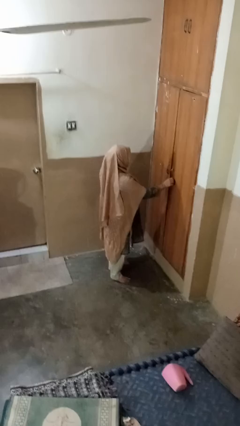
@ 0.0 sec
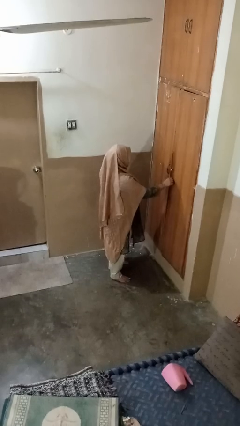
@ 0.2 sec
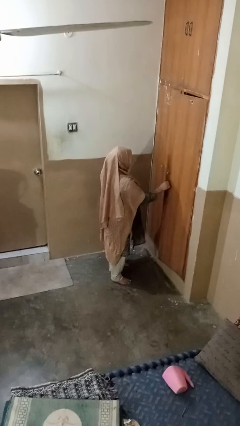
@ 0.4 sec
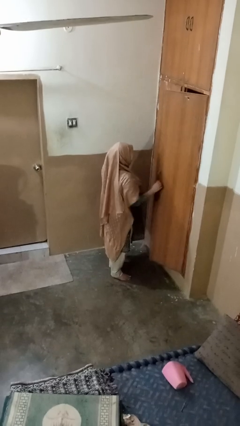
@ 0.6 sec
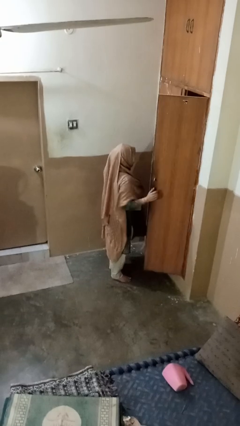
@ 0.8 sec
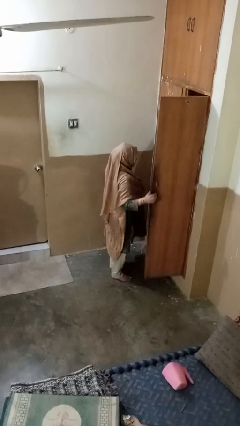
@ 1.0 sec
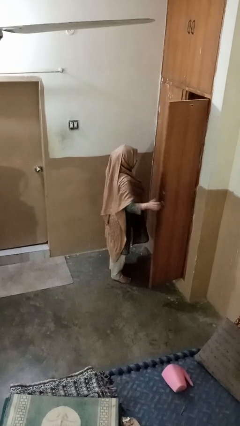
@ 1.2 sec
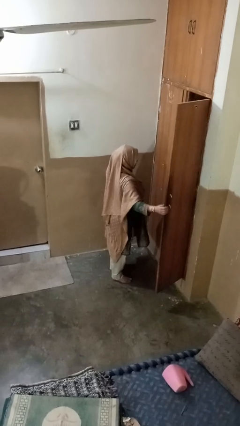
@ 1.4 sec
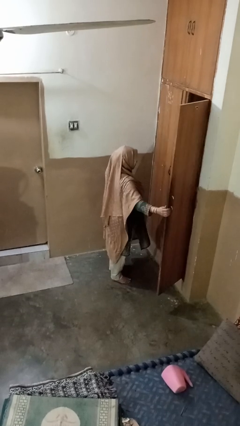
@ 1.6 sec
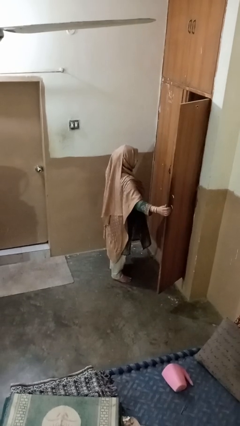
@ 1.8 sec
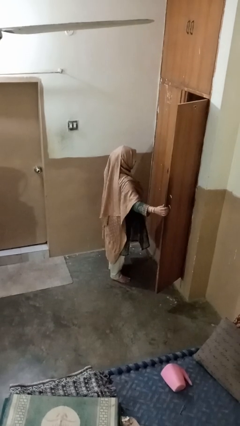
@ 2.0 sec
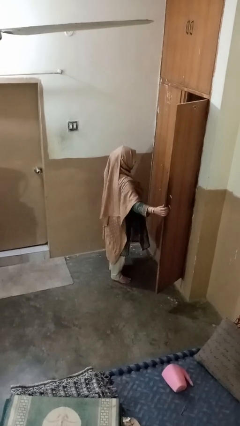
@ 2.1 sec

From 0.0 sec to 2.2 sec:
person opens closet door

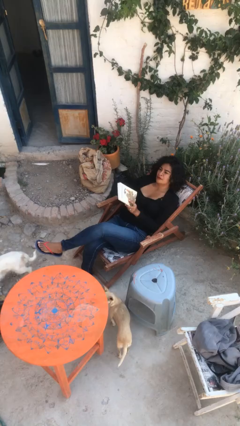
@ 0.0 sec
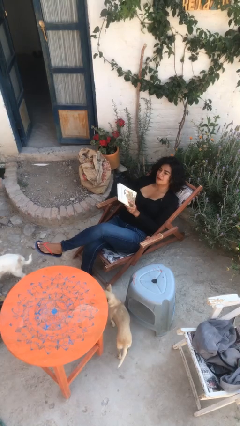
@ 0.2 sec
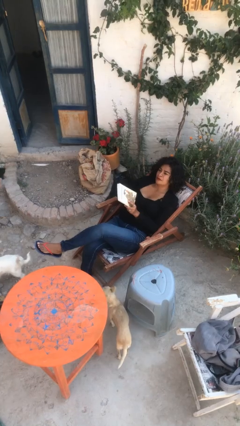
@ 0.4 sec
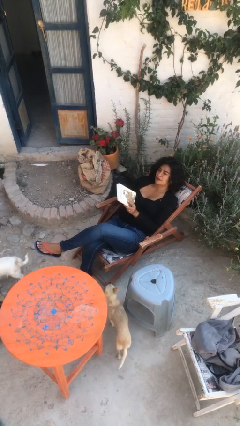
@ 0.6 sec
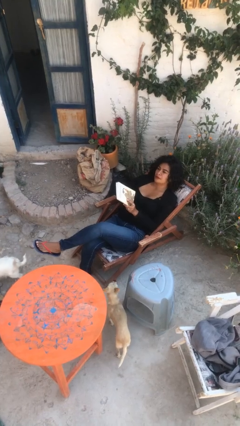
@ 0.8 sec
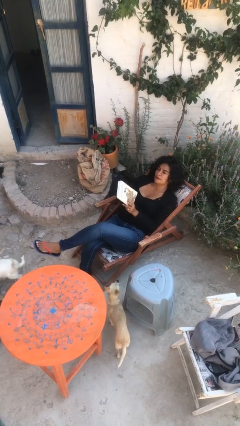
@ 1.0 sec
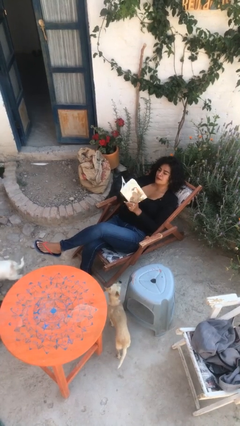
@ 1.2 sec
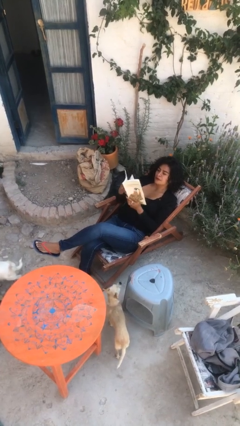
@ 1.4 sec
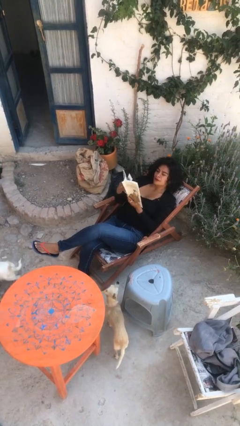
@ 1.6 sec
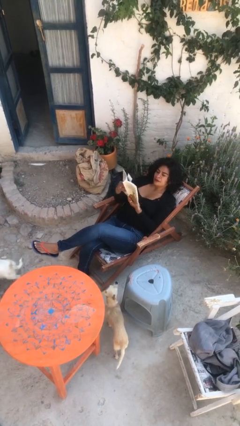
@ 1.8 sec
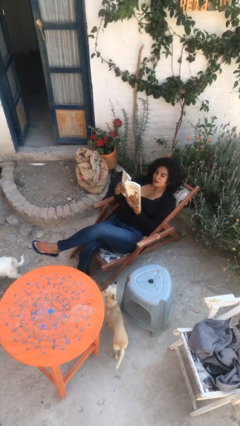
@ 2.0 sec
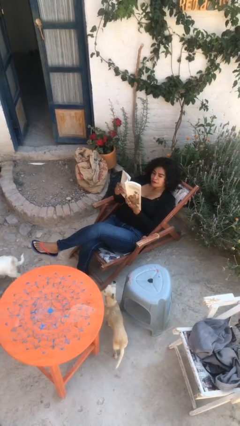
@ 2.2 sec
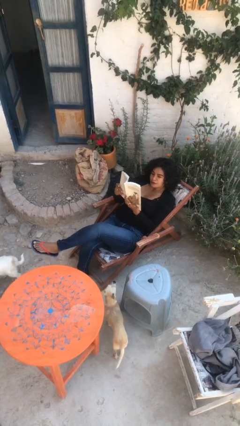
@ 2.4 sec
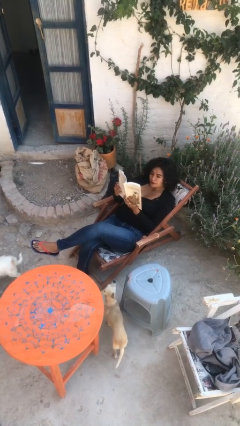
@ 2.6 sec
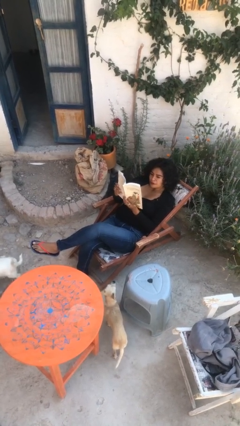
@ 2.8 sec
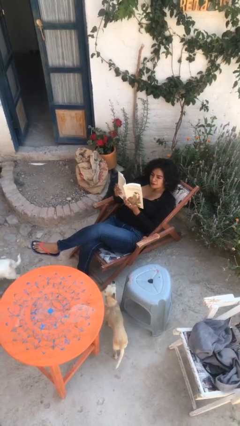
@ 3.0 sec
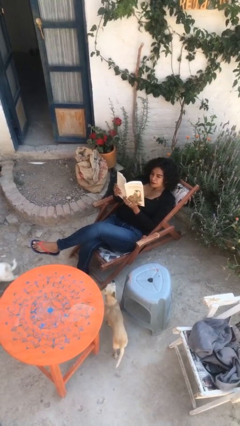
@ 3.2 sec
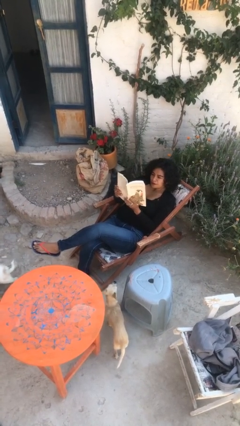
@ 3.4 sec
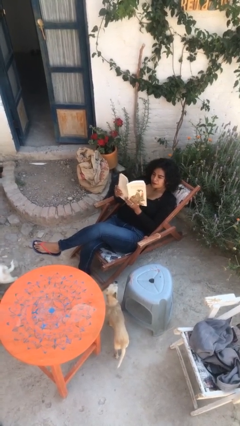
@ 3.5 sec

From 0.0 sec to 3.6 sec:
person reads document

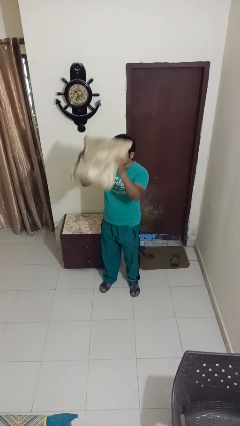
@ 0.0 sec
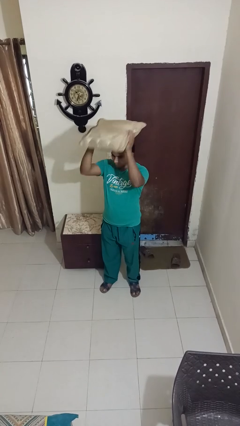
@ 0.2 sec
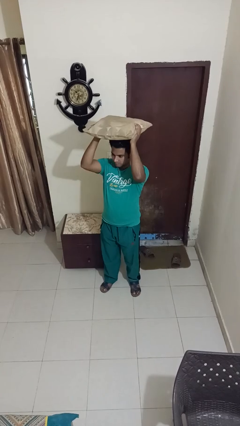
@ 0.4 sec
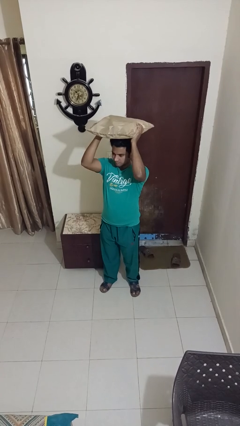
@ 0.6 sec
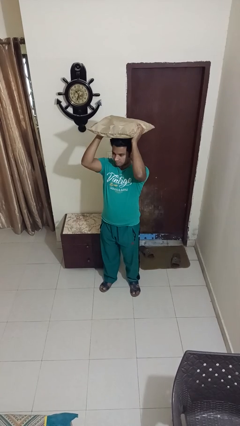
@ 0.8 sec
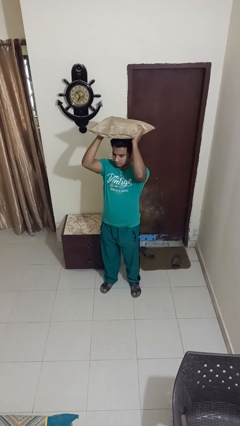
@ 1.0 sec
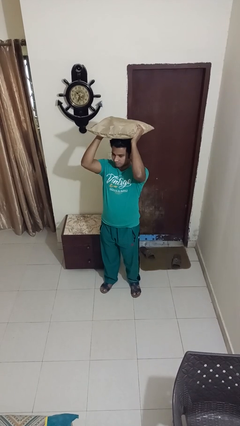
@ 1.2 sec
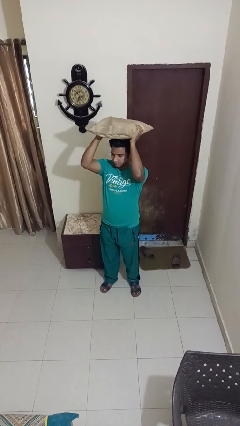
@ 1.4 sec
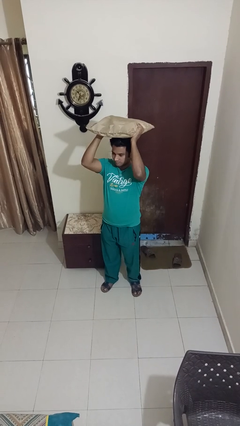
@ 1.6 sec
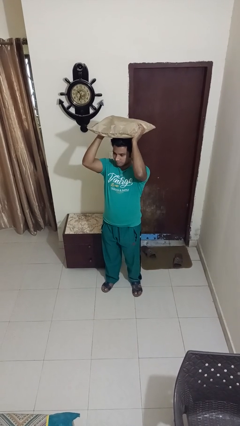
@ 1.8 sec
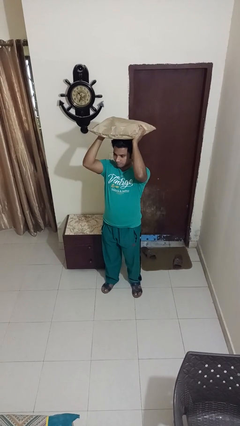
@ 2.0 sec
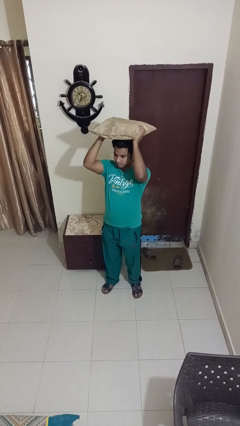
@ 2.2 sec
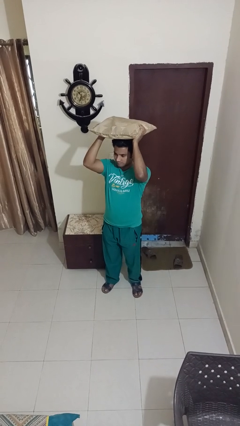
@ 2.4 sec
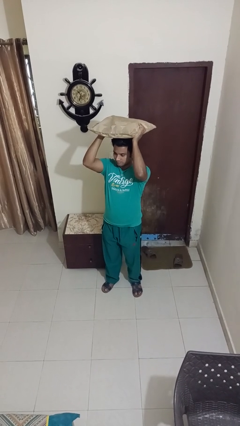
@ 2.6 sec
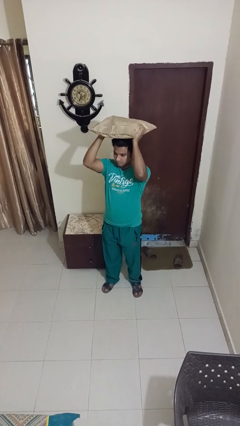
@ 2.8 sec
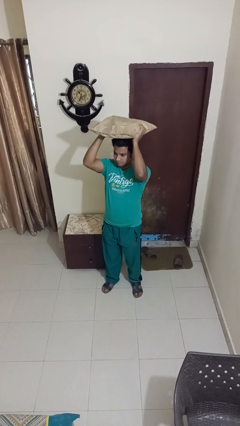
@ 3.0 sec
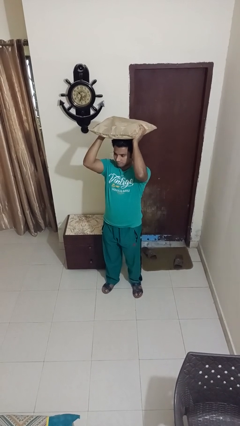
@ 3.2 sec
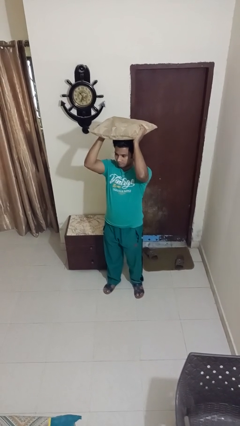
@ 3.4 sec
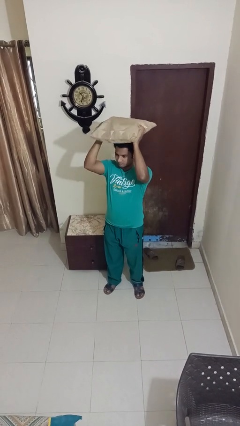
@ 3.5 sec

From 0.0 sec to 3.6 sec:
person holds object above head

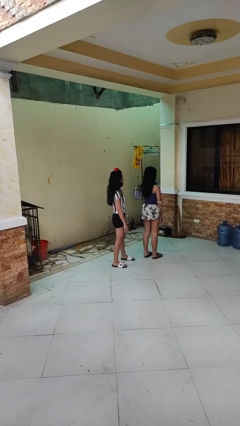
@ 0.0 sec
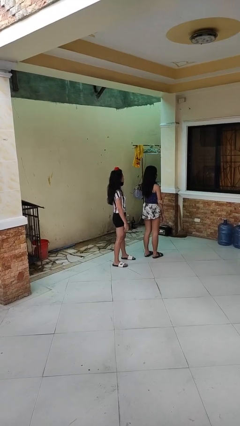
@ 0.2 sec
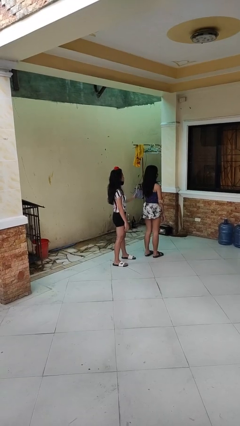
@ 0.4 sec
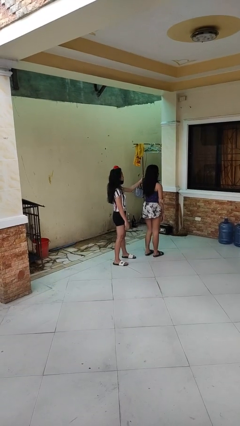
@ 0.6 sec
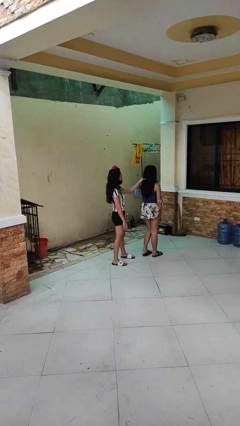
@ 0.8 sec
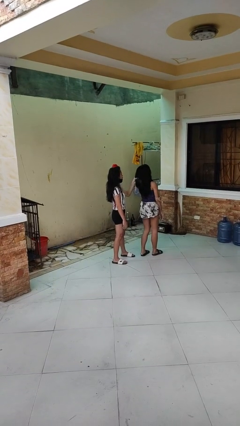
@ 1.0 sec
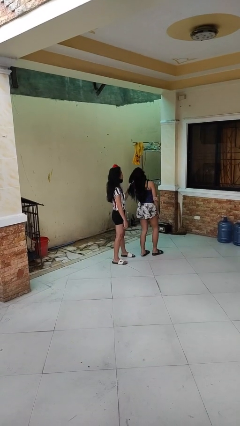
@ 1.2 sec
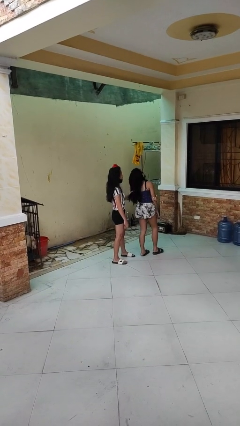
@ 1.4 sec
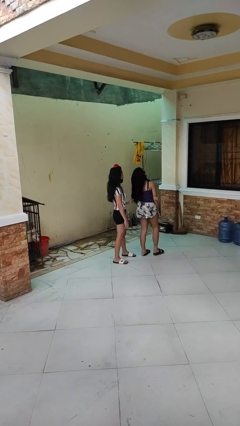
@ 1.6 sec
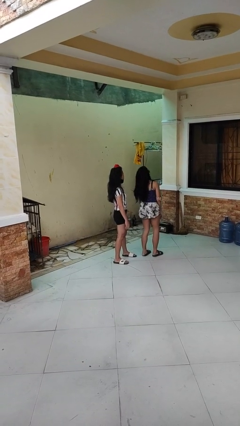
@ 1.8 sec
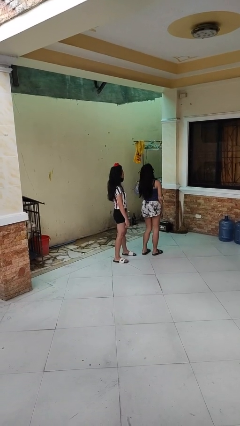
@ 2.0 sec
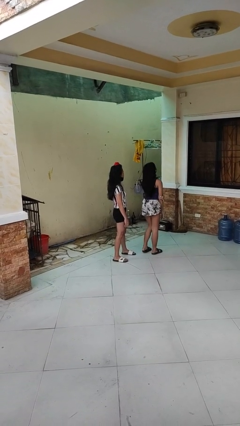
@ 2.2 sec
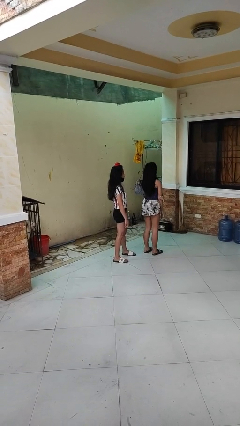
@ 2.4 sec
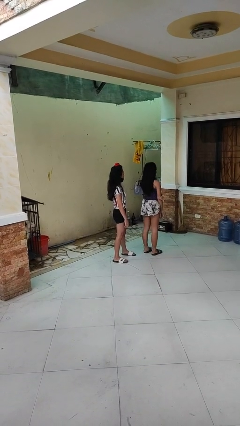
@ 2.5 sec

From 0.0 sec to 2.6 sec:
person grabs person by hair

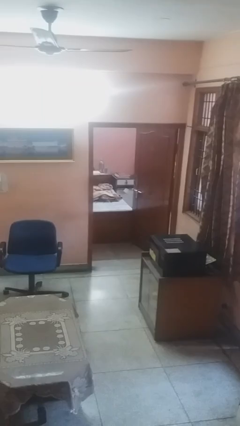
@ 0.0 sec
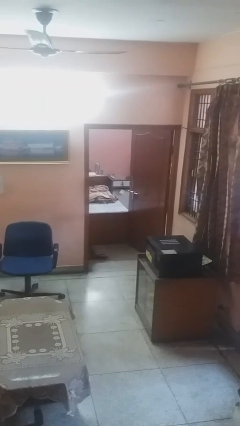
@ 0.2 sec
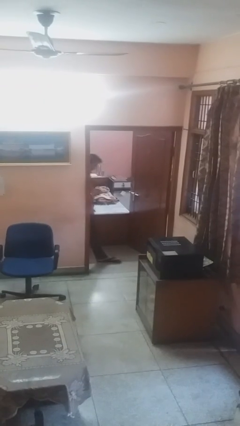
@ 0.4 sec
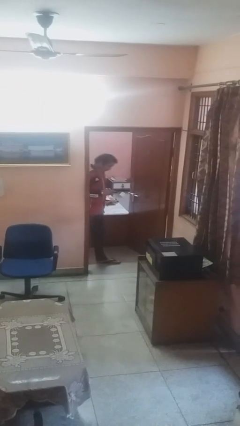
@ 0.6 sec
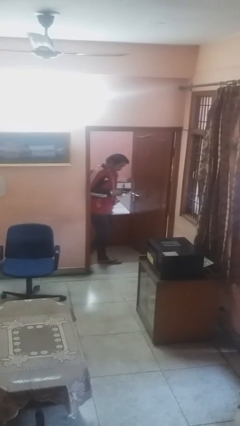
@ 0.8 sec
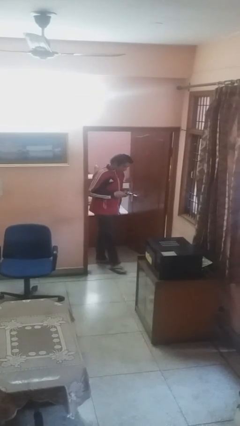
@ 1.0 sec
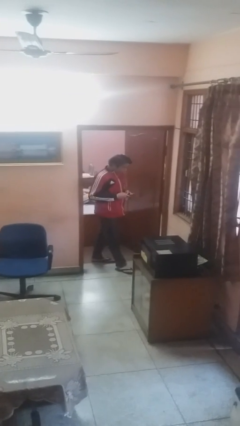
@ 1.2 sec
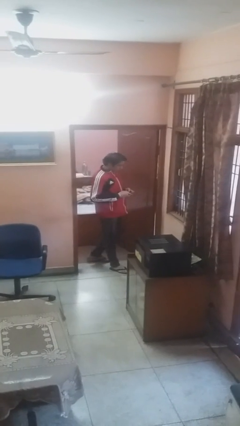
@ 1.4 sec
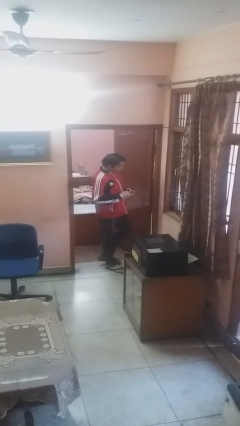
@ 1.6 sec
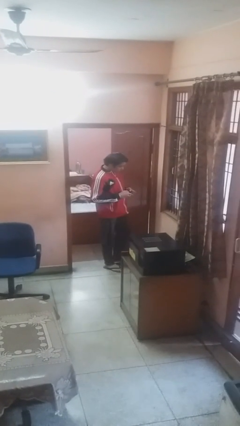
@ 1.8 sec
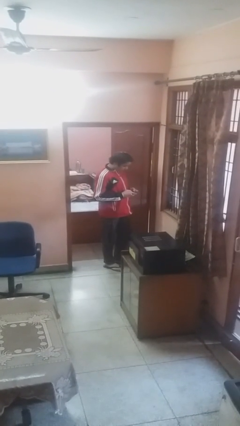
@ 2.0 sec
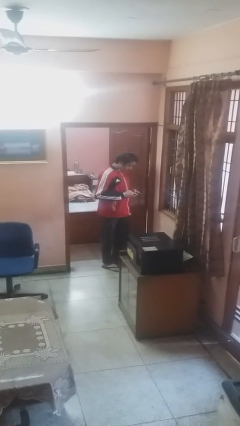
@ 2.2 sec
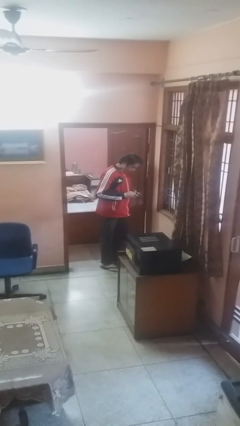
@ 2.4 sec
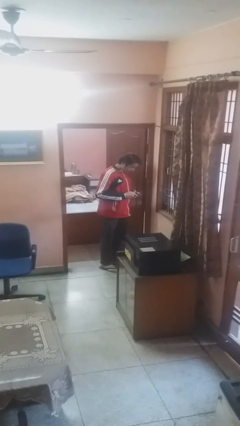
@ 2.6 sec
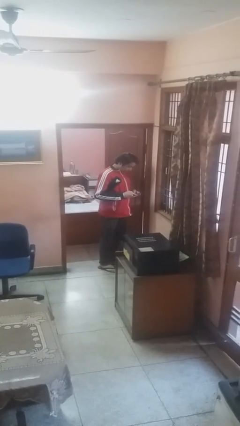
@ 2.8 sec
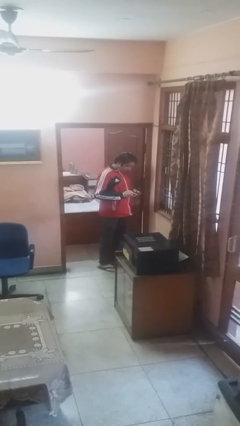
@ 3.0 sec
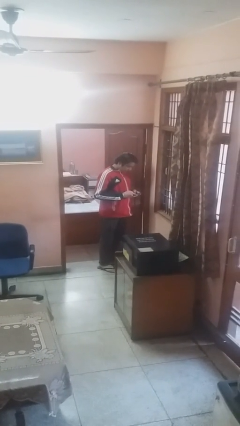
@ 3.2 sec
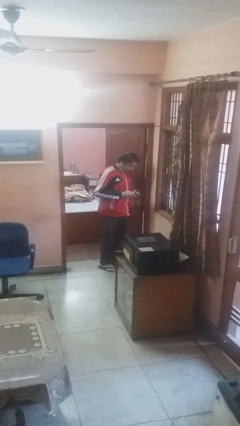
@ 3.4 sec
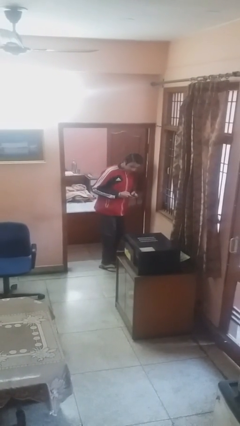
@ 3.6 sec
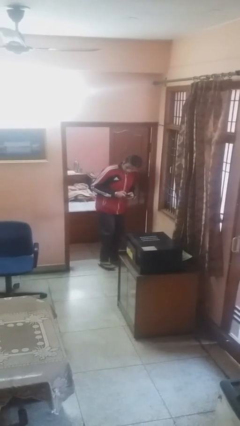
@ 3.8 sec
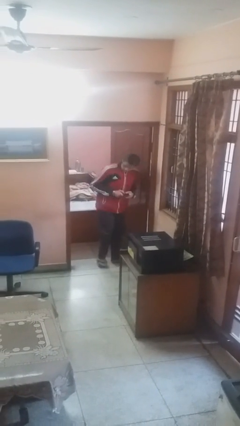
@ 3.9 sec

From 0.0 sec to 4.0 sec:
person enters scene through structure

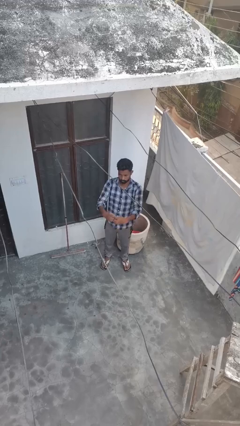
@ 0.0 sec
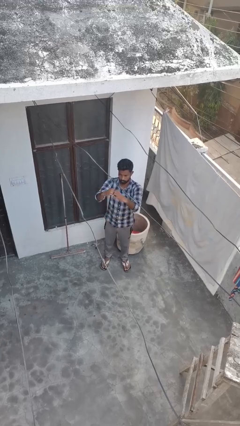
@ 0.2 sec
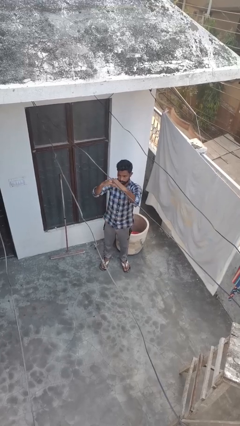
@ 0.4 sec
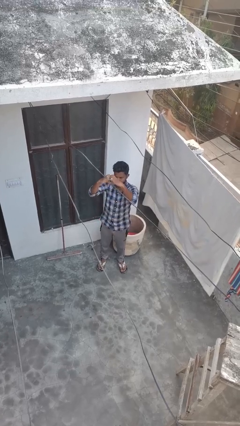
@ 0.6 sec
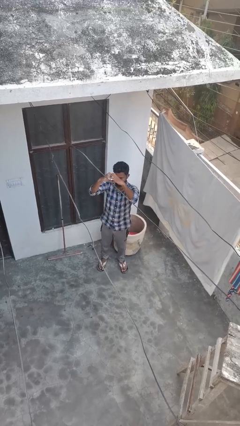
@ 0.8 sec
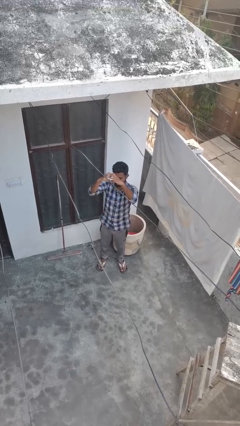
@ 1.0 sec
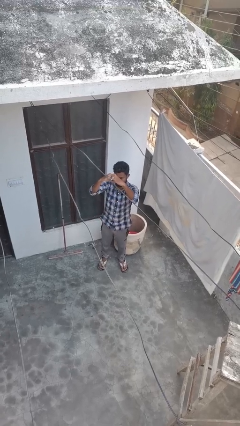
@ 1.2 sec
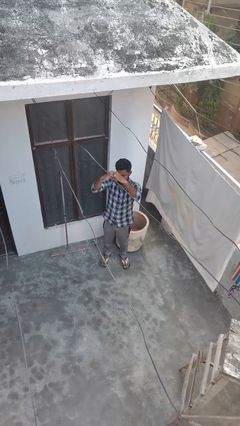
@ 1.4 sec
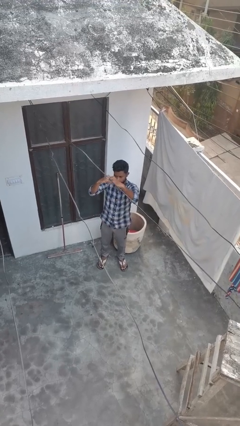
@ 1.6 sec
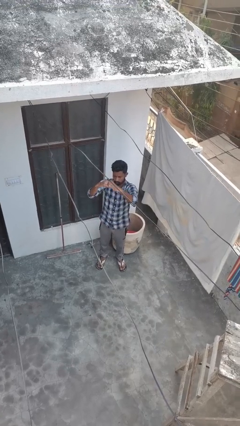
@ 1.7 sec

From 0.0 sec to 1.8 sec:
person gestures heart
